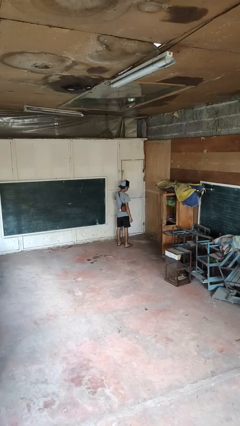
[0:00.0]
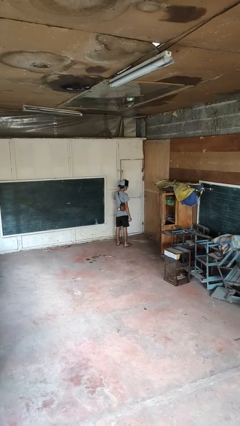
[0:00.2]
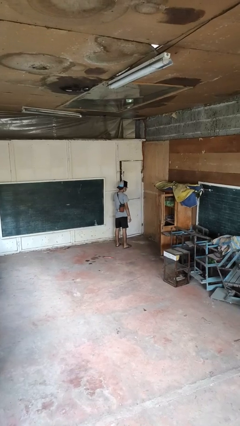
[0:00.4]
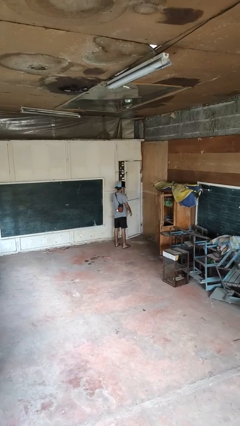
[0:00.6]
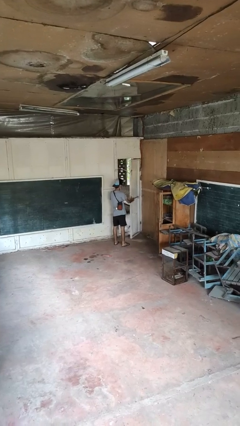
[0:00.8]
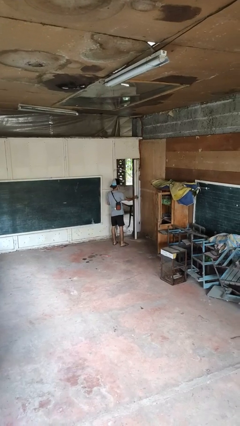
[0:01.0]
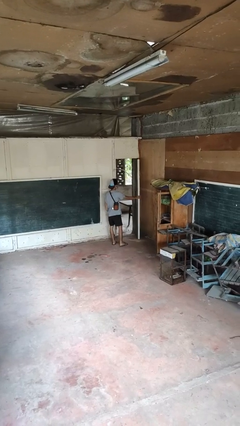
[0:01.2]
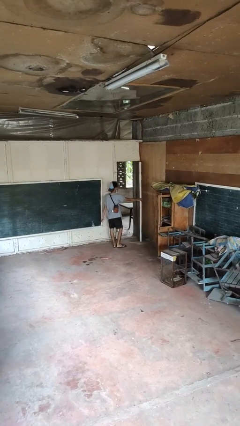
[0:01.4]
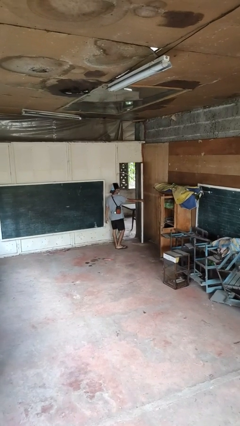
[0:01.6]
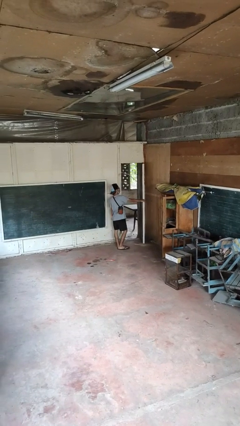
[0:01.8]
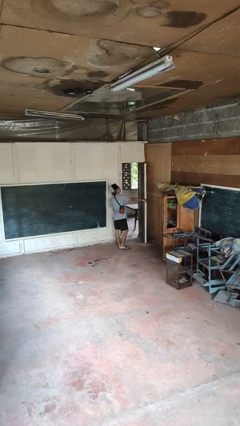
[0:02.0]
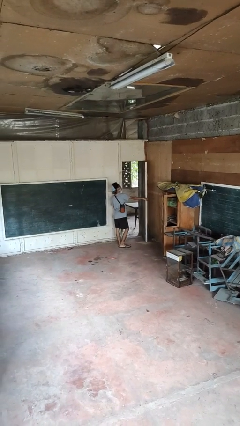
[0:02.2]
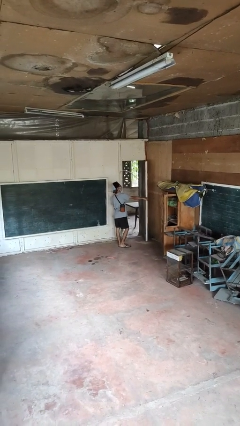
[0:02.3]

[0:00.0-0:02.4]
person opens facility door

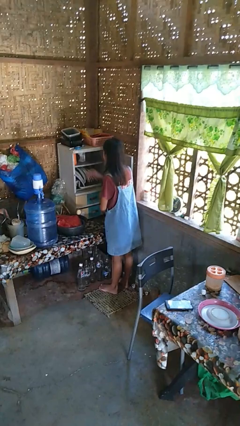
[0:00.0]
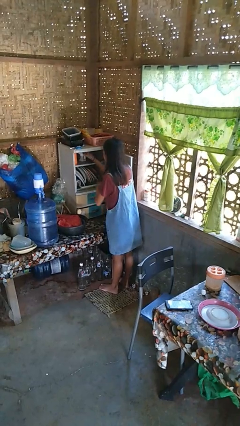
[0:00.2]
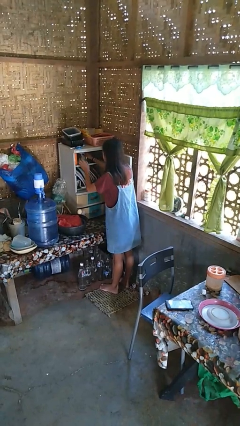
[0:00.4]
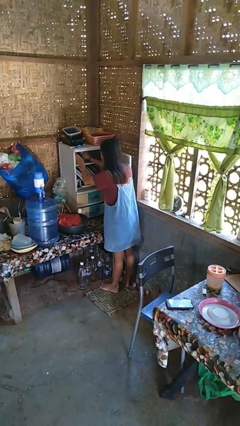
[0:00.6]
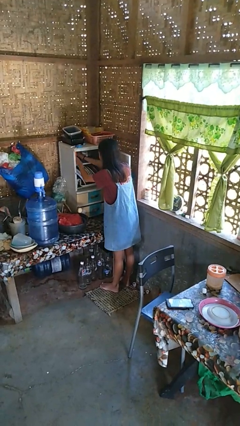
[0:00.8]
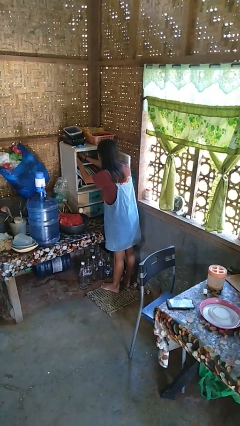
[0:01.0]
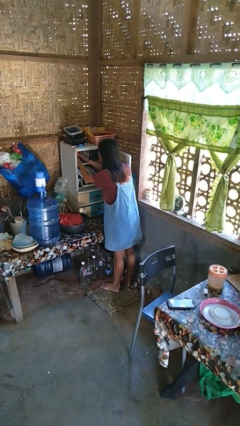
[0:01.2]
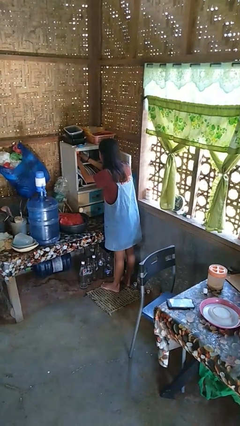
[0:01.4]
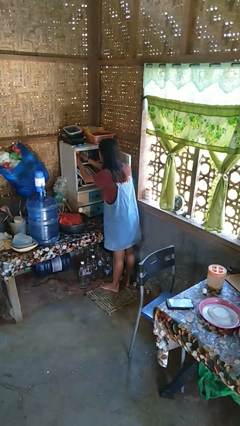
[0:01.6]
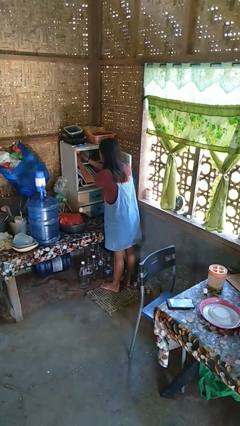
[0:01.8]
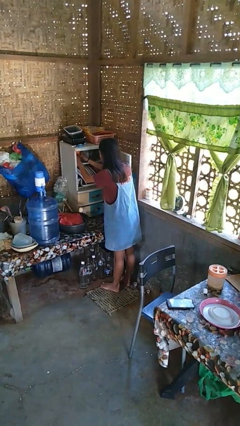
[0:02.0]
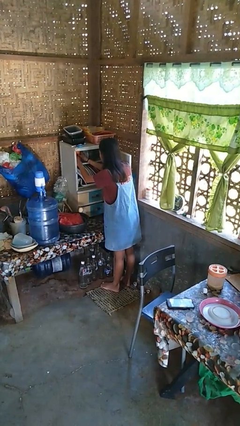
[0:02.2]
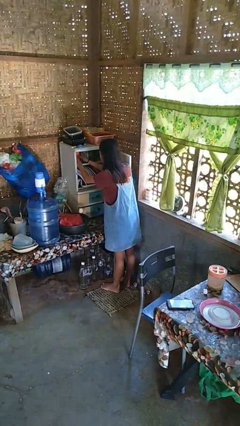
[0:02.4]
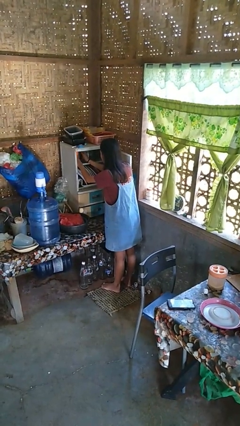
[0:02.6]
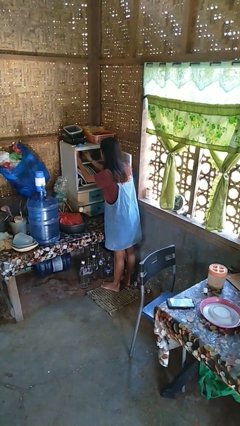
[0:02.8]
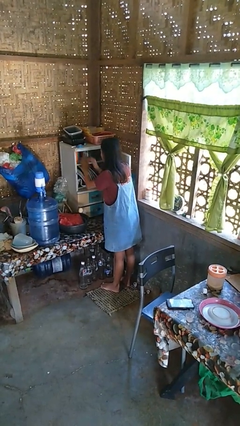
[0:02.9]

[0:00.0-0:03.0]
person searches in cabinet

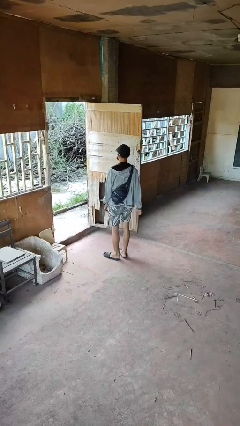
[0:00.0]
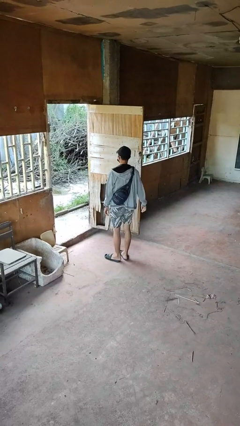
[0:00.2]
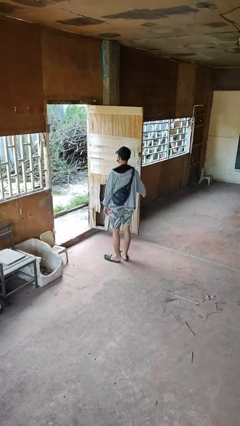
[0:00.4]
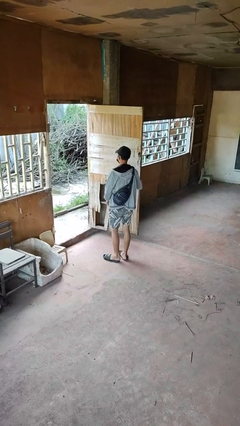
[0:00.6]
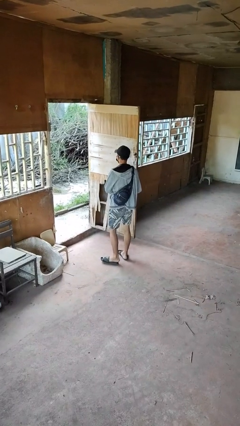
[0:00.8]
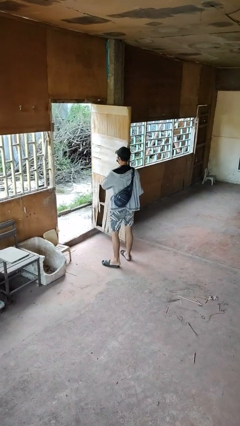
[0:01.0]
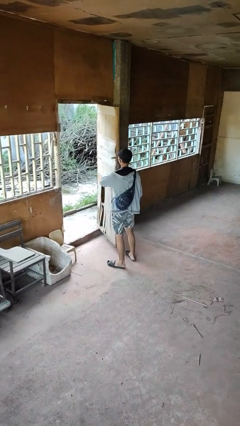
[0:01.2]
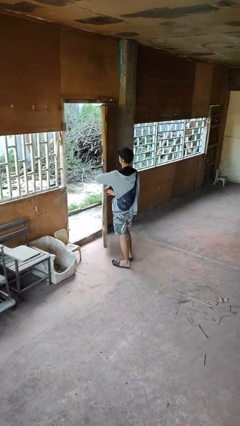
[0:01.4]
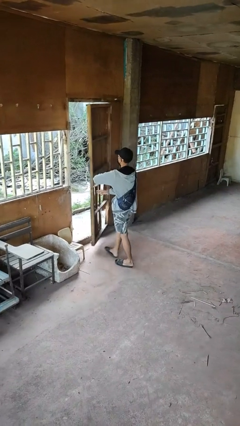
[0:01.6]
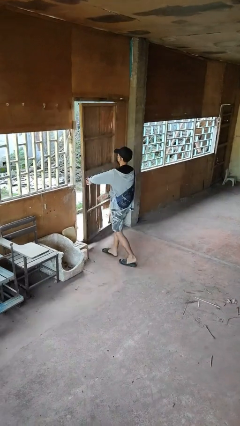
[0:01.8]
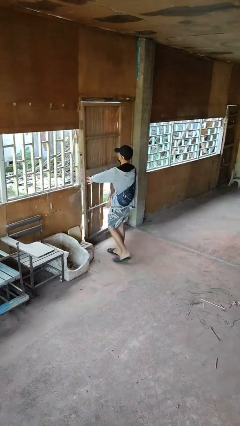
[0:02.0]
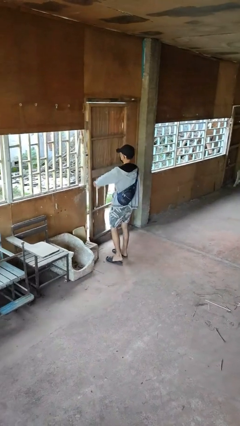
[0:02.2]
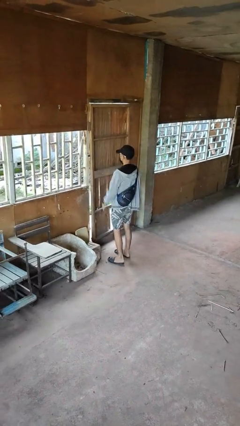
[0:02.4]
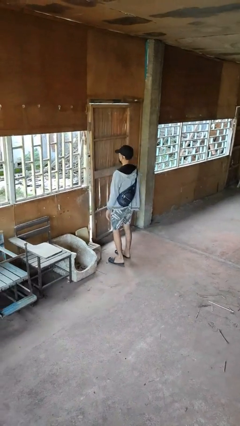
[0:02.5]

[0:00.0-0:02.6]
person closes facility door

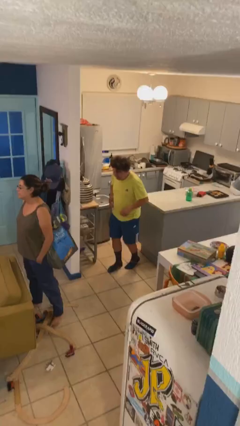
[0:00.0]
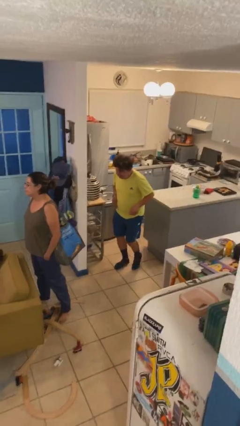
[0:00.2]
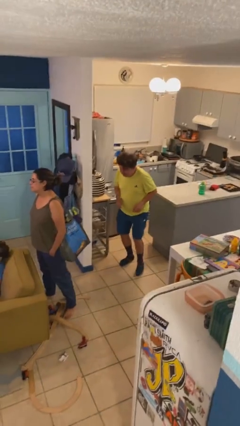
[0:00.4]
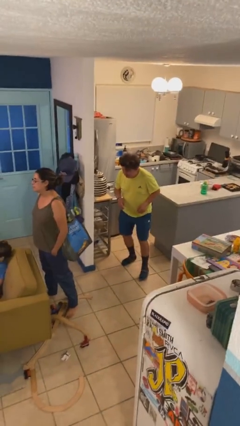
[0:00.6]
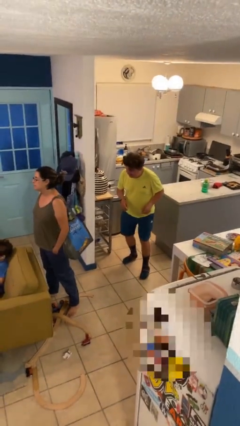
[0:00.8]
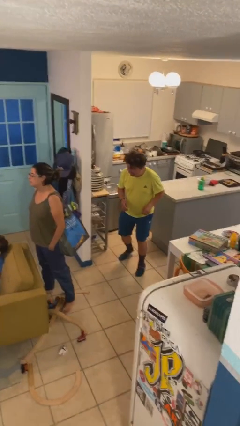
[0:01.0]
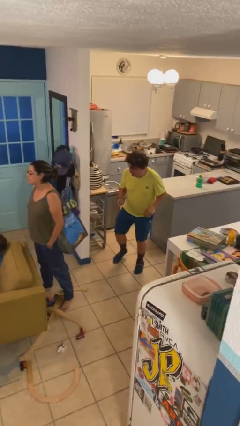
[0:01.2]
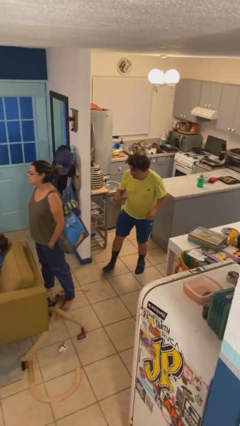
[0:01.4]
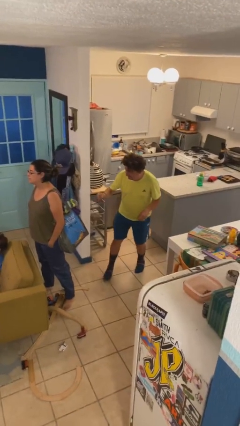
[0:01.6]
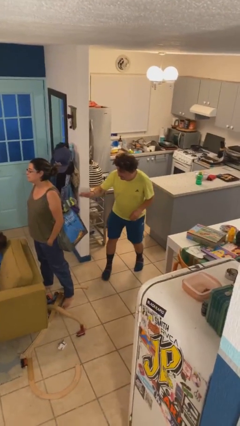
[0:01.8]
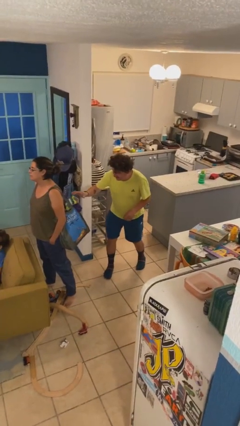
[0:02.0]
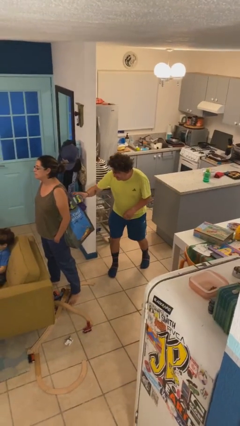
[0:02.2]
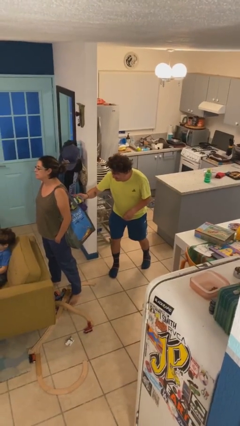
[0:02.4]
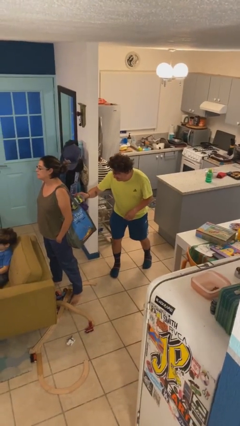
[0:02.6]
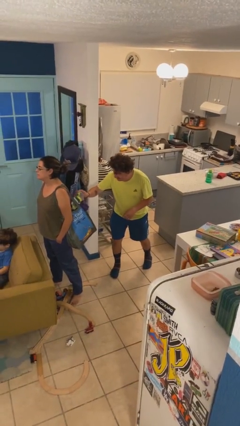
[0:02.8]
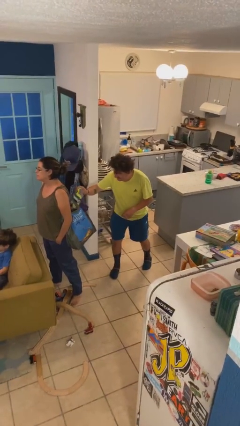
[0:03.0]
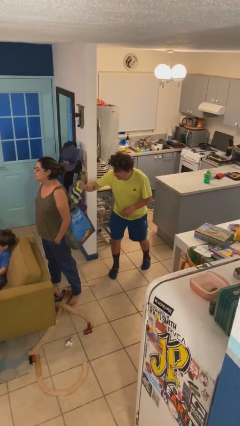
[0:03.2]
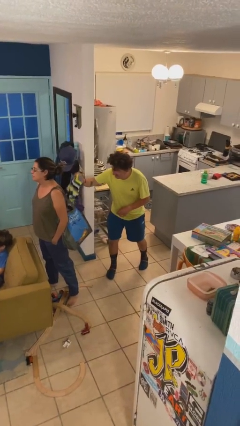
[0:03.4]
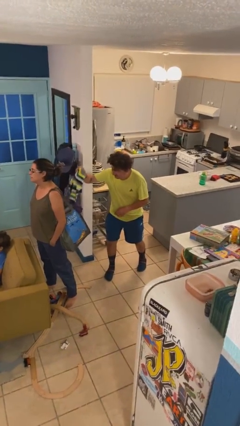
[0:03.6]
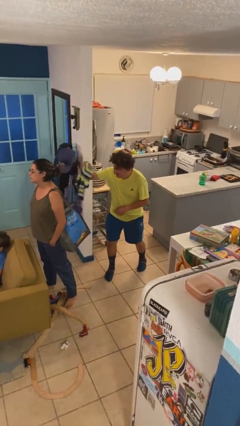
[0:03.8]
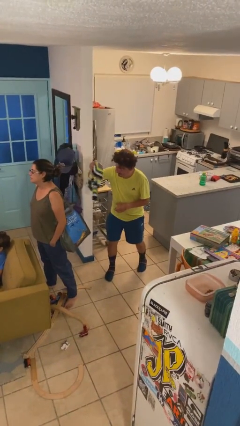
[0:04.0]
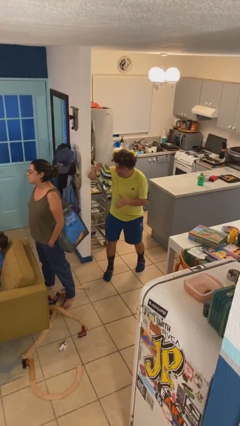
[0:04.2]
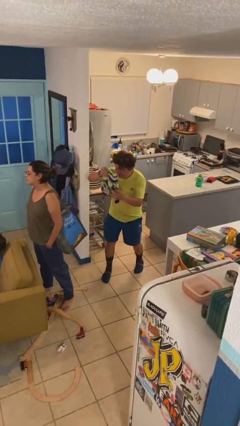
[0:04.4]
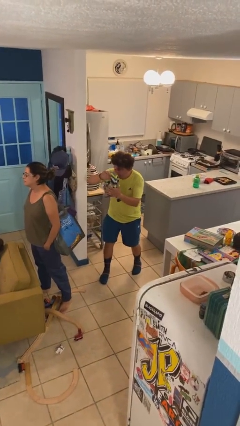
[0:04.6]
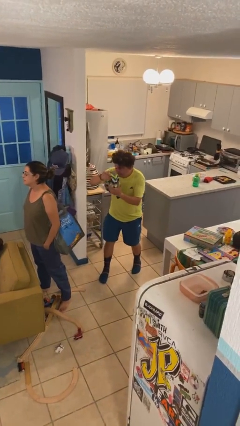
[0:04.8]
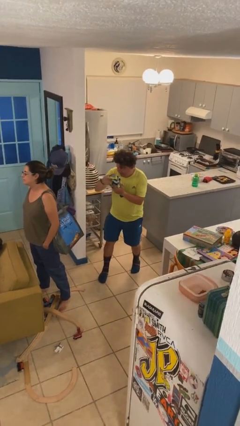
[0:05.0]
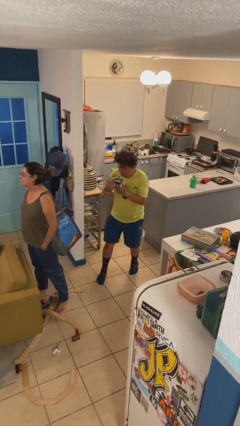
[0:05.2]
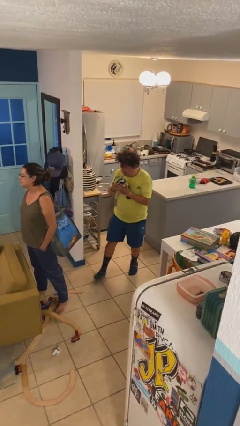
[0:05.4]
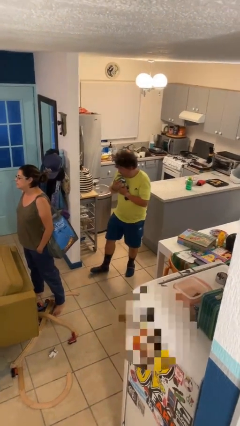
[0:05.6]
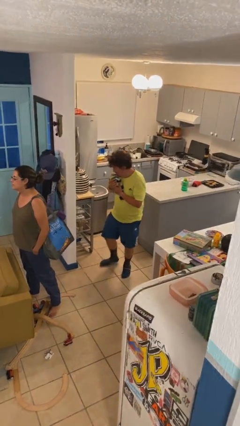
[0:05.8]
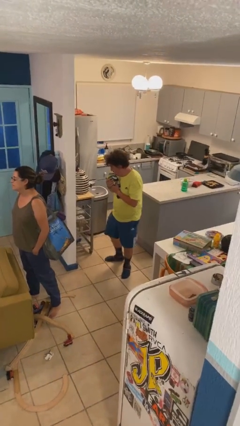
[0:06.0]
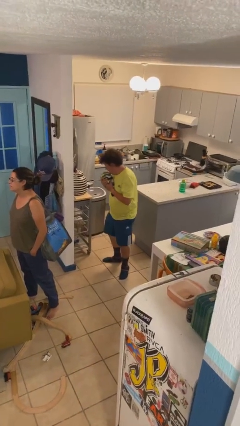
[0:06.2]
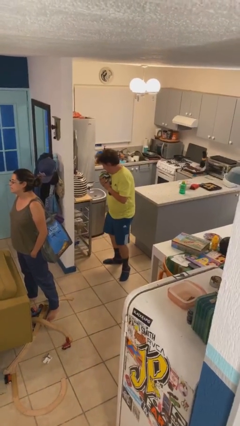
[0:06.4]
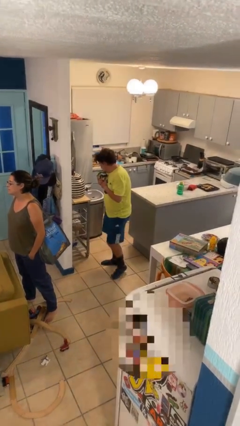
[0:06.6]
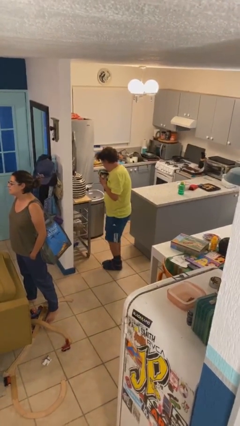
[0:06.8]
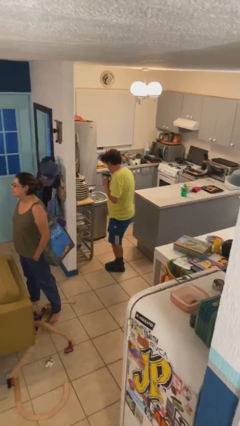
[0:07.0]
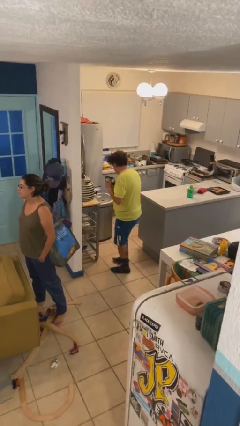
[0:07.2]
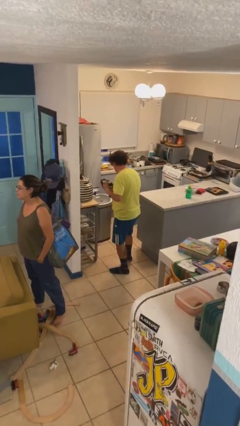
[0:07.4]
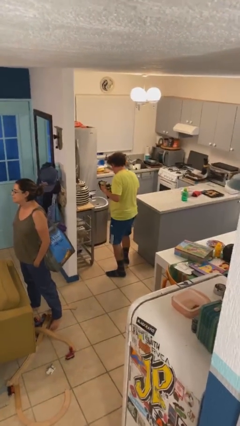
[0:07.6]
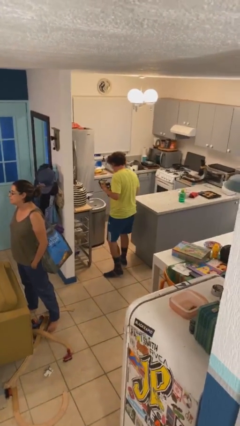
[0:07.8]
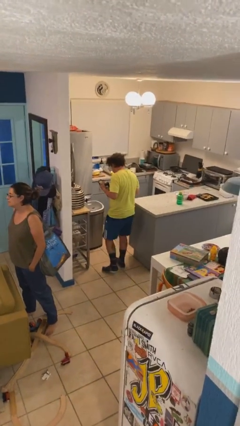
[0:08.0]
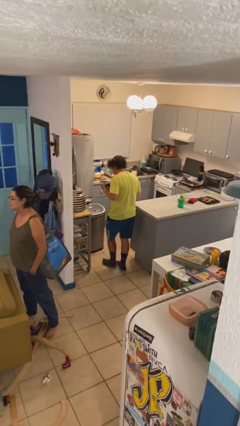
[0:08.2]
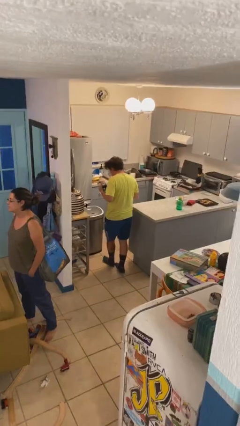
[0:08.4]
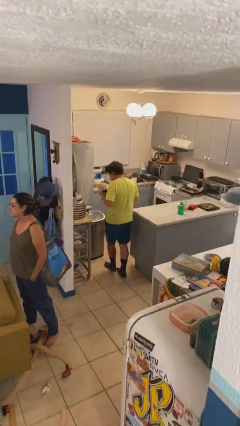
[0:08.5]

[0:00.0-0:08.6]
person steals object from person

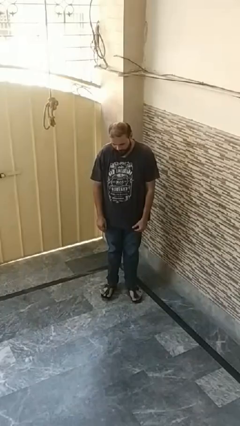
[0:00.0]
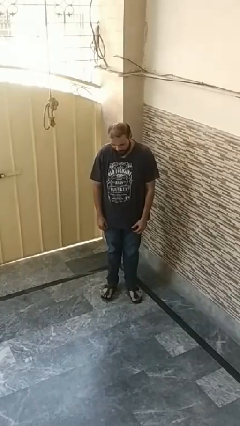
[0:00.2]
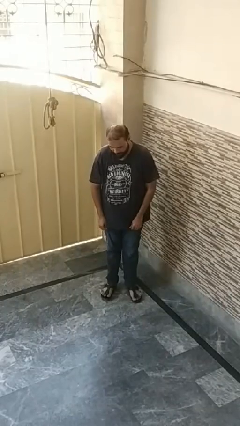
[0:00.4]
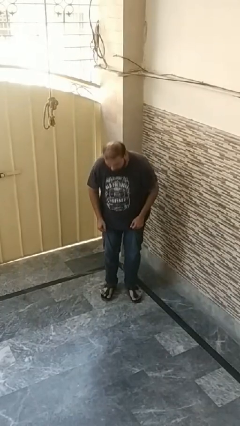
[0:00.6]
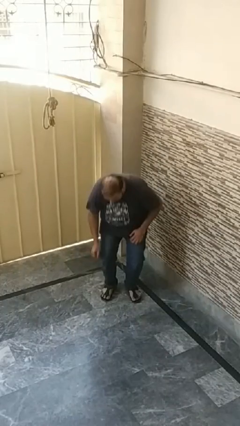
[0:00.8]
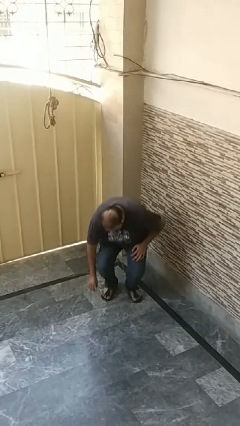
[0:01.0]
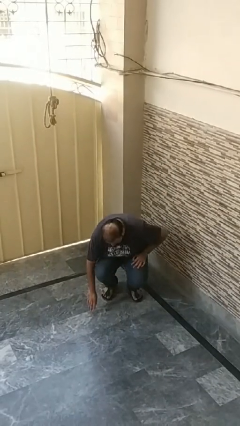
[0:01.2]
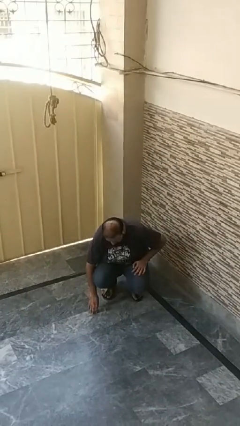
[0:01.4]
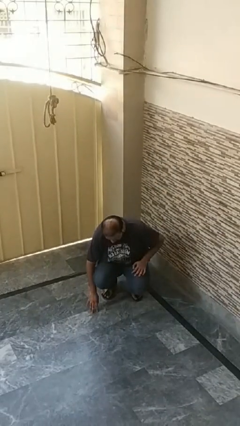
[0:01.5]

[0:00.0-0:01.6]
person falls while standing
